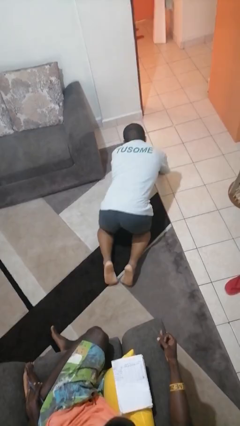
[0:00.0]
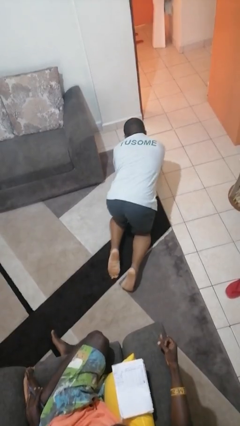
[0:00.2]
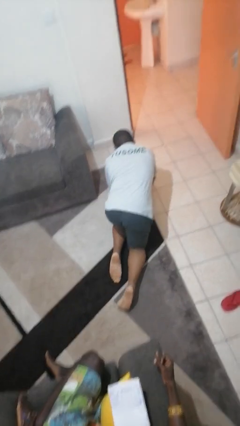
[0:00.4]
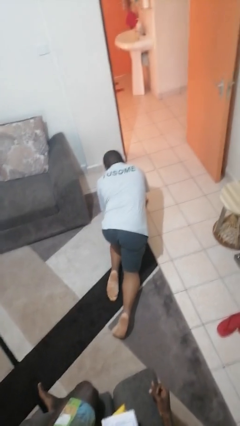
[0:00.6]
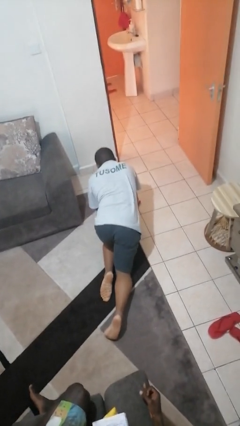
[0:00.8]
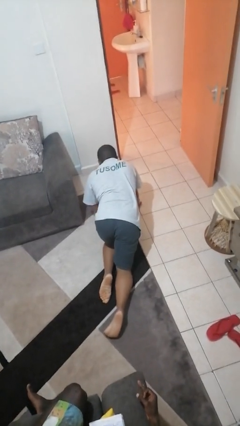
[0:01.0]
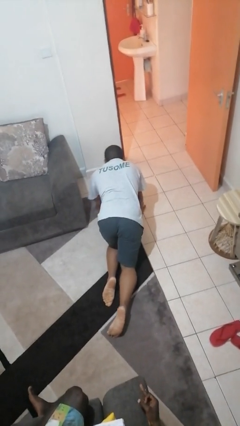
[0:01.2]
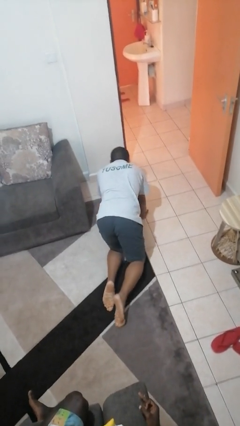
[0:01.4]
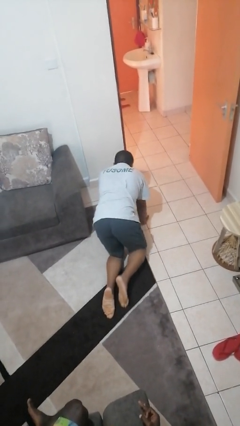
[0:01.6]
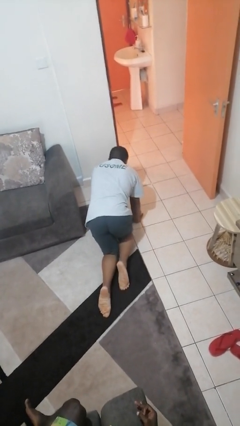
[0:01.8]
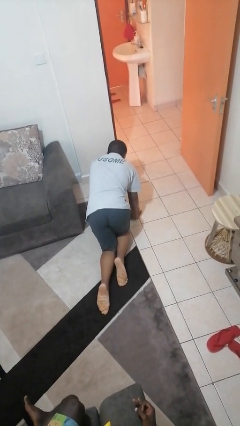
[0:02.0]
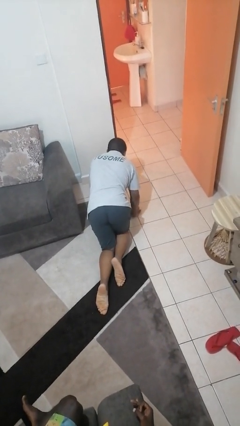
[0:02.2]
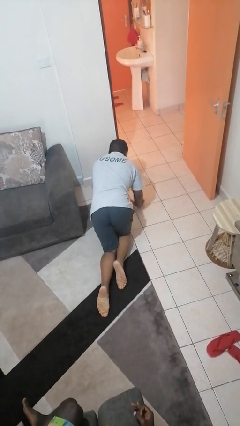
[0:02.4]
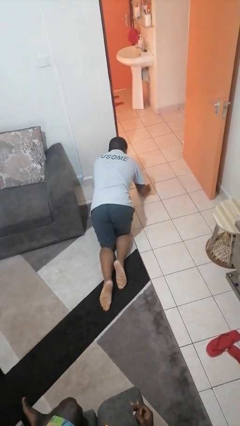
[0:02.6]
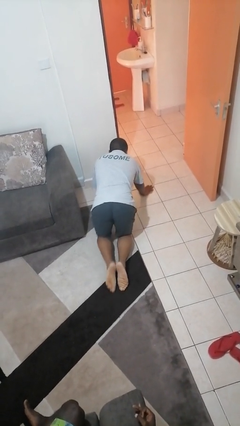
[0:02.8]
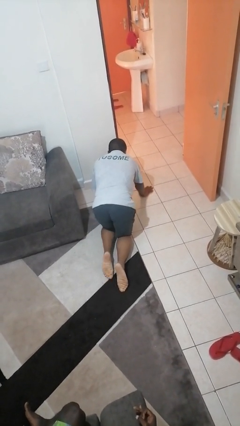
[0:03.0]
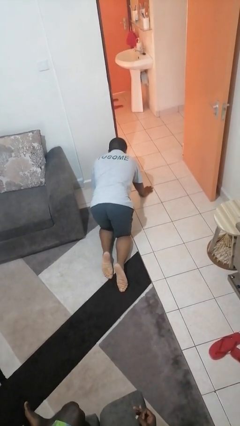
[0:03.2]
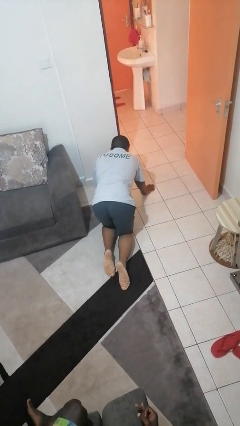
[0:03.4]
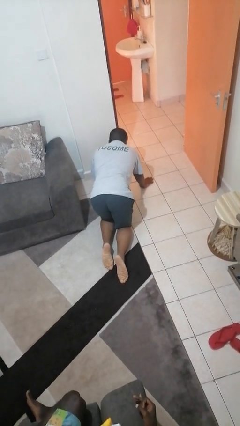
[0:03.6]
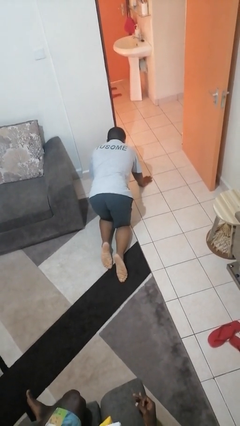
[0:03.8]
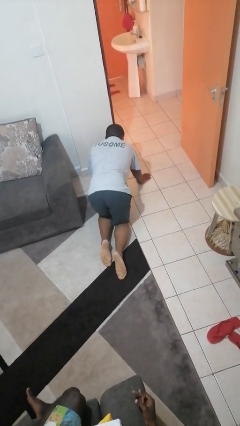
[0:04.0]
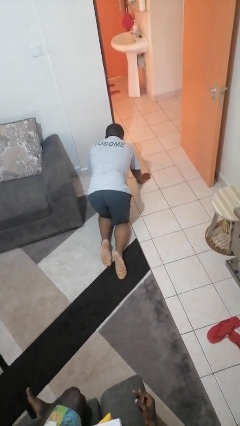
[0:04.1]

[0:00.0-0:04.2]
person crawls

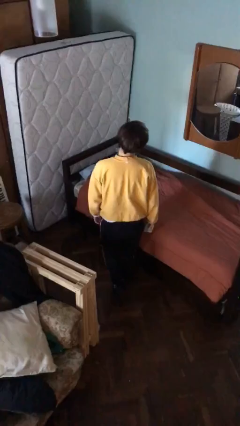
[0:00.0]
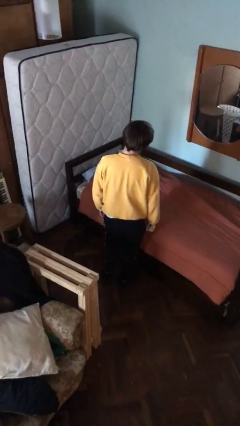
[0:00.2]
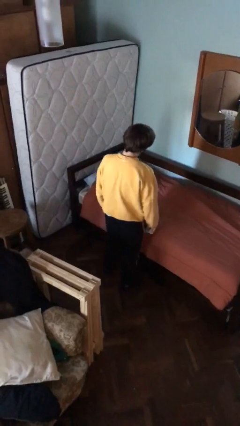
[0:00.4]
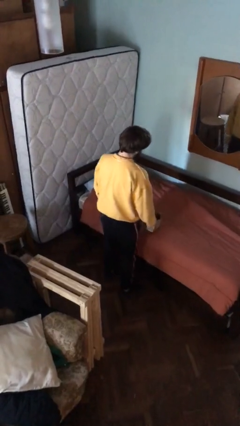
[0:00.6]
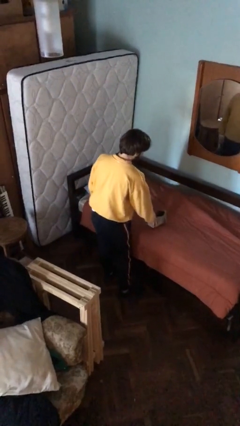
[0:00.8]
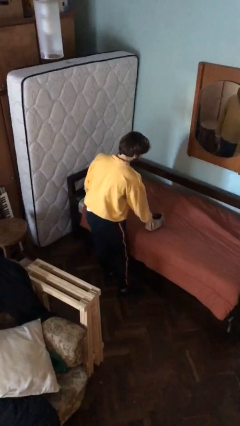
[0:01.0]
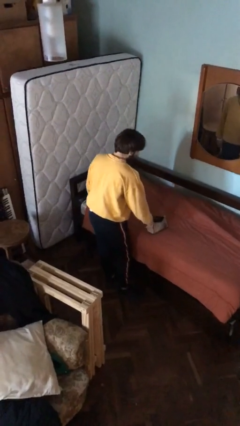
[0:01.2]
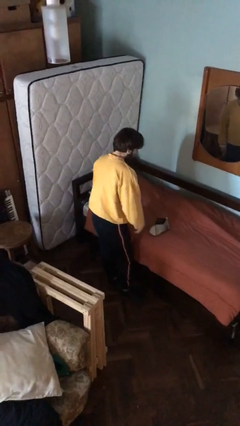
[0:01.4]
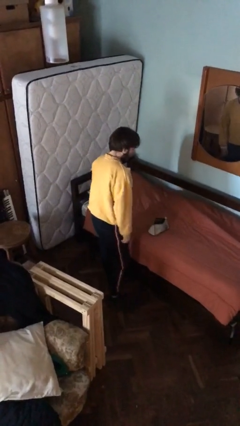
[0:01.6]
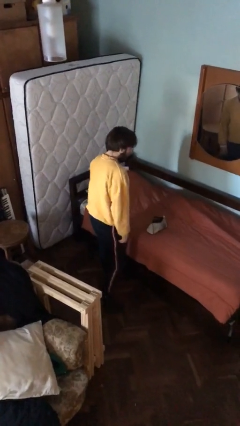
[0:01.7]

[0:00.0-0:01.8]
person puts down object on bed

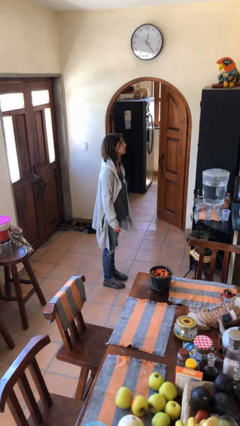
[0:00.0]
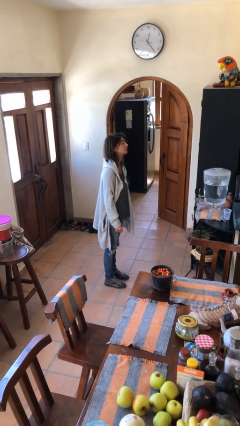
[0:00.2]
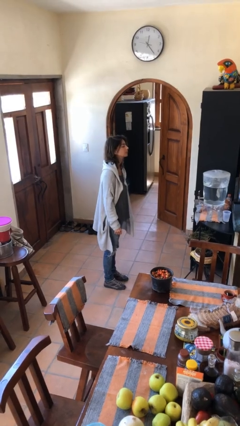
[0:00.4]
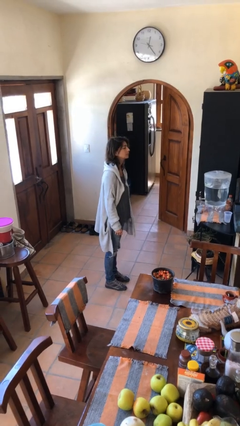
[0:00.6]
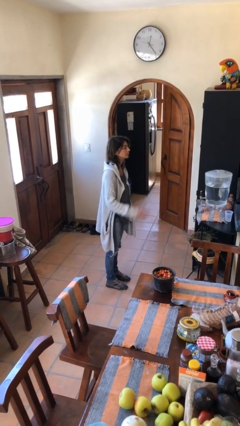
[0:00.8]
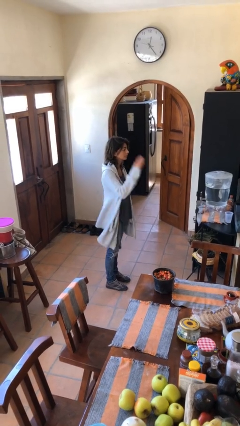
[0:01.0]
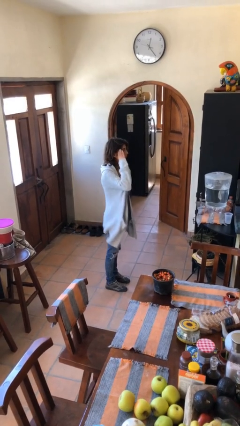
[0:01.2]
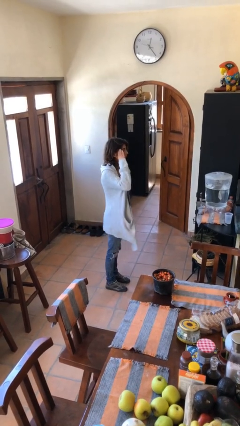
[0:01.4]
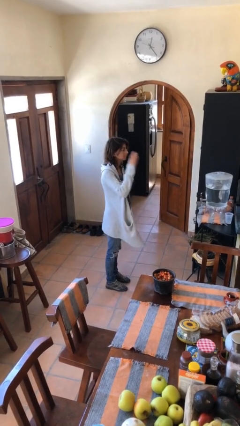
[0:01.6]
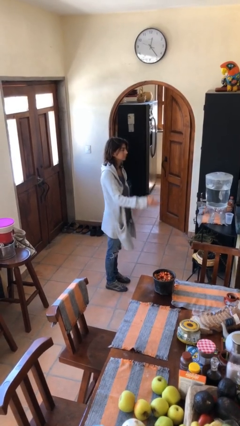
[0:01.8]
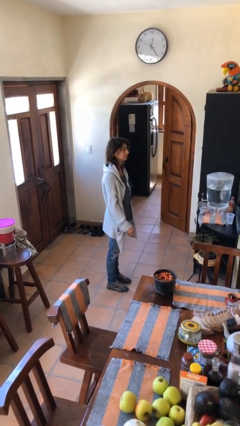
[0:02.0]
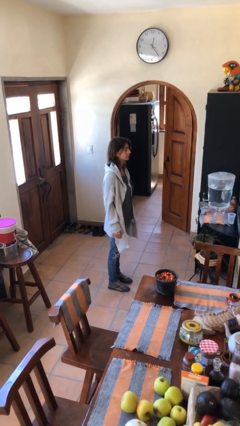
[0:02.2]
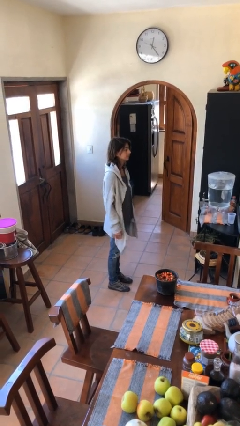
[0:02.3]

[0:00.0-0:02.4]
person salutes

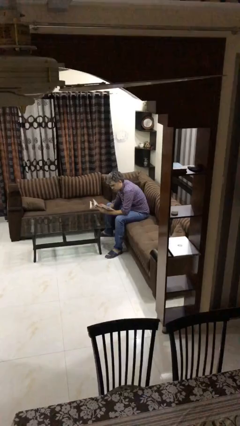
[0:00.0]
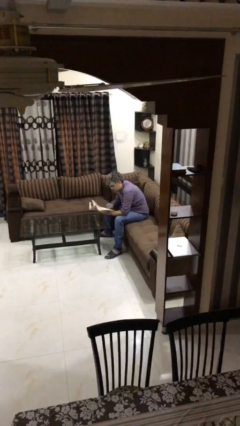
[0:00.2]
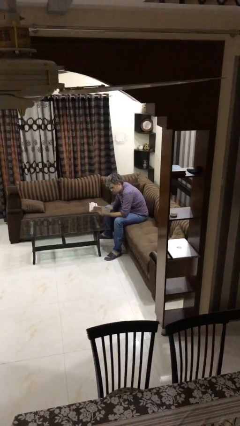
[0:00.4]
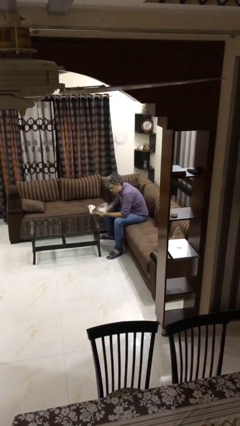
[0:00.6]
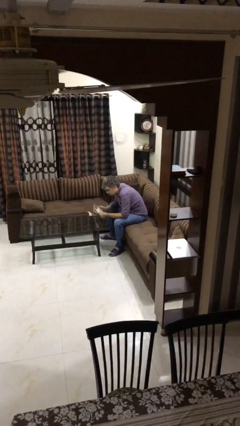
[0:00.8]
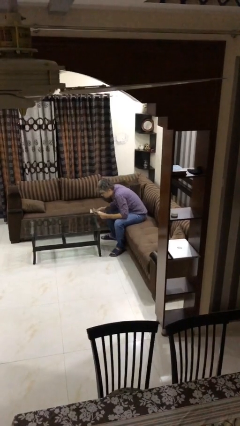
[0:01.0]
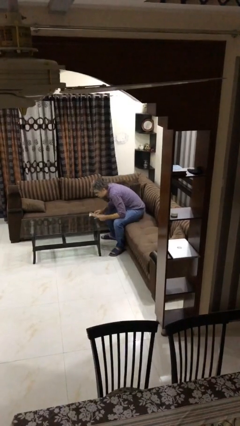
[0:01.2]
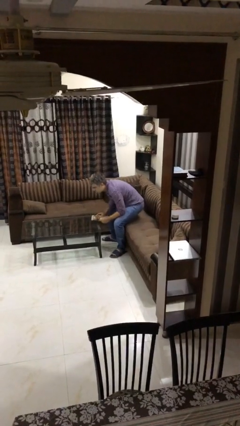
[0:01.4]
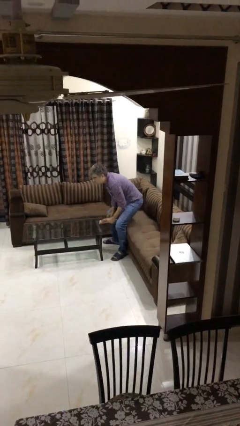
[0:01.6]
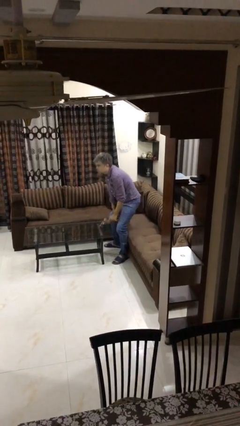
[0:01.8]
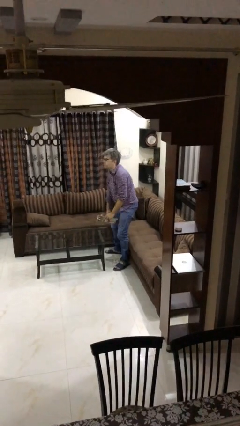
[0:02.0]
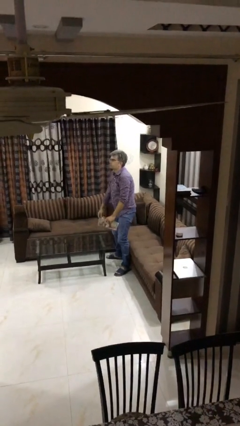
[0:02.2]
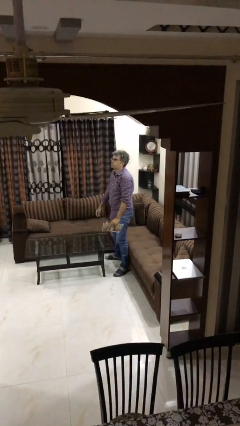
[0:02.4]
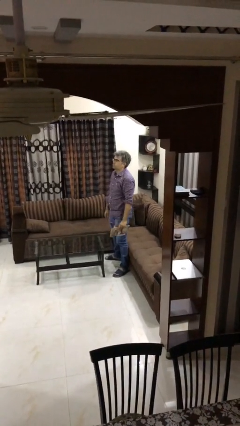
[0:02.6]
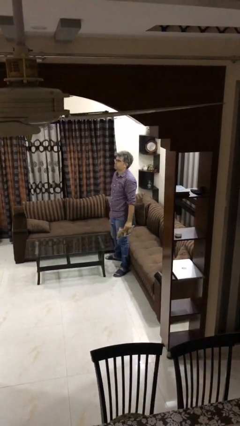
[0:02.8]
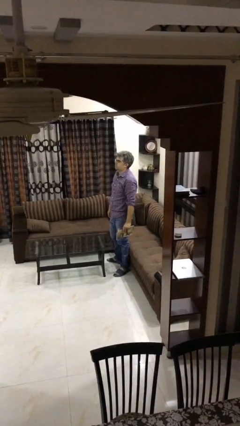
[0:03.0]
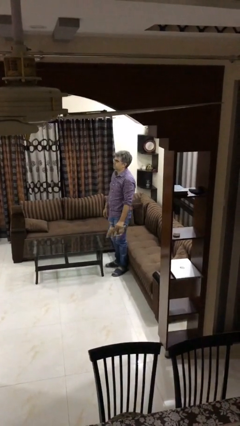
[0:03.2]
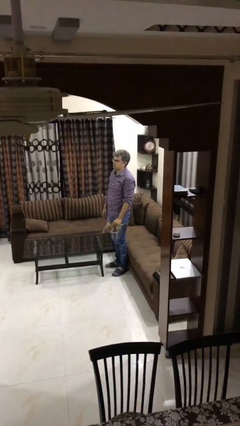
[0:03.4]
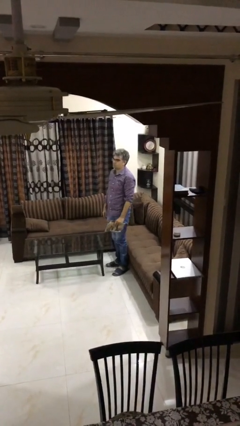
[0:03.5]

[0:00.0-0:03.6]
person stands up

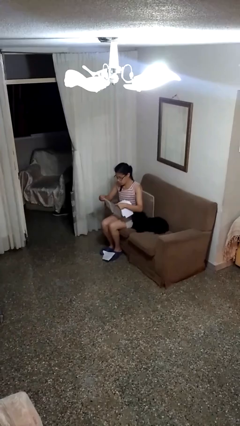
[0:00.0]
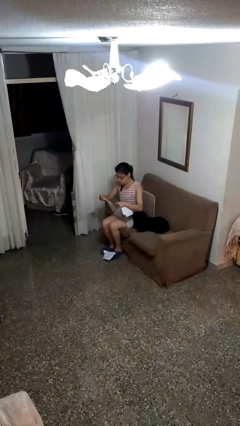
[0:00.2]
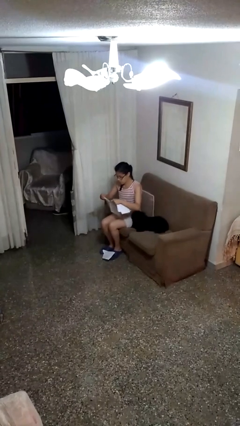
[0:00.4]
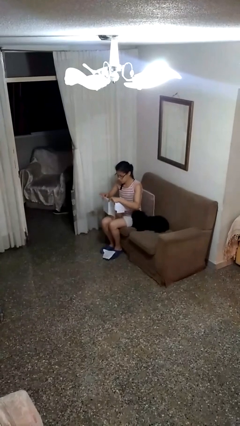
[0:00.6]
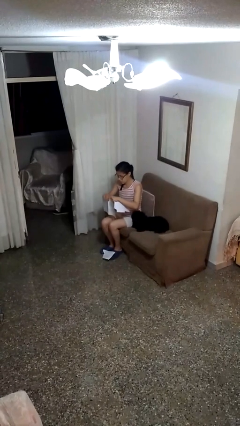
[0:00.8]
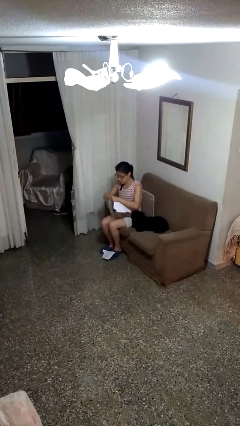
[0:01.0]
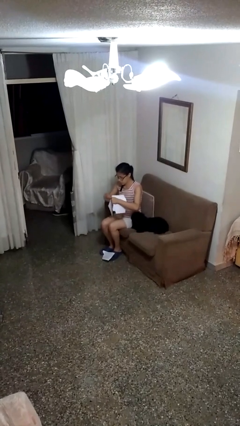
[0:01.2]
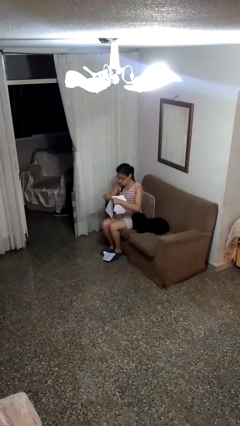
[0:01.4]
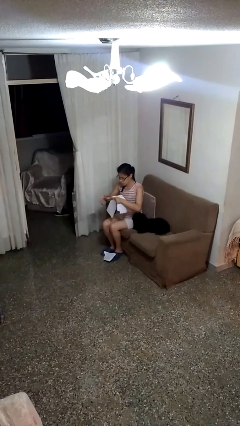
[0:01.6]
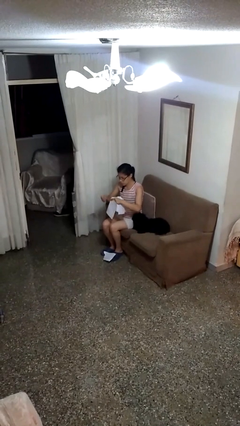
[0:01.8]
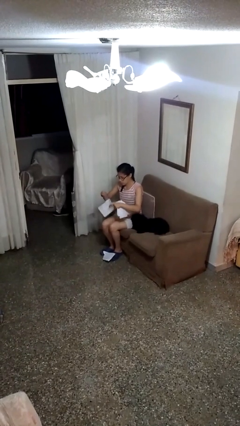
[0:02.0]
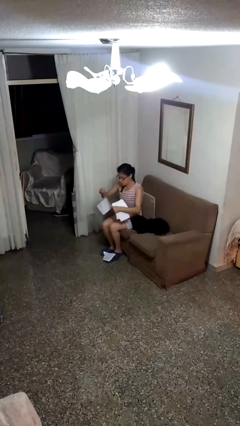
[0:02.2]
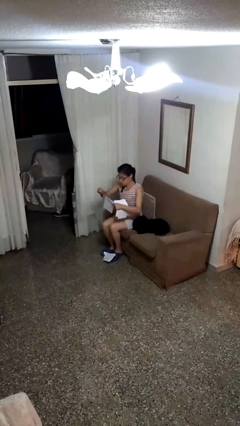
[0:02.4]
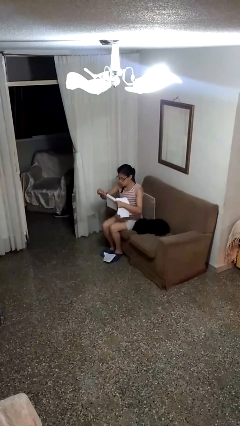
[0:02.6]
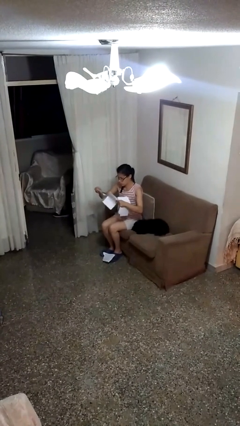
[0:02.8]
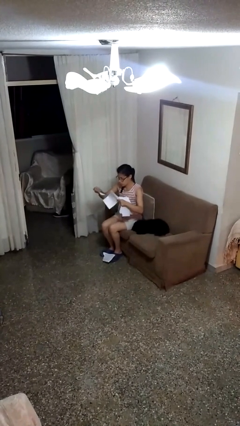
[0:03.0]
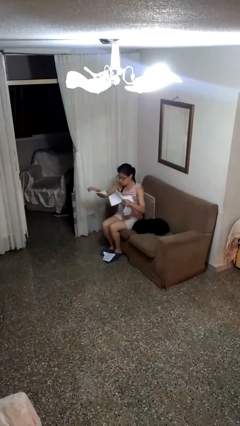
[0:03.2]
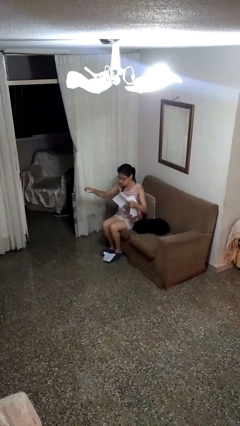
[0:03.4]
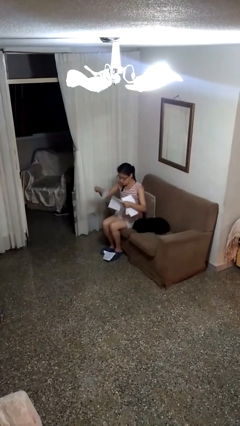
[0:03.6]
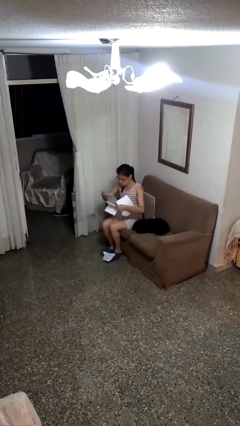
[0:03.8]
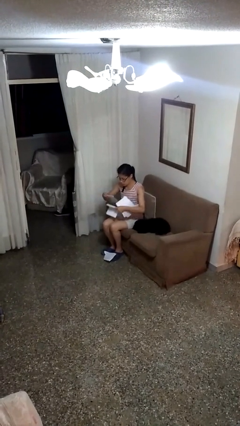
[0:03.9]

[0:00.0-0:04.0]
person tears paper

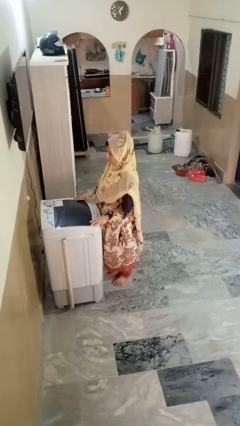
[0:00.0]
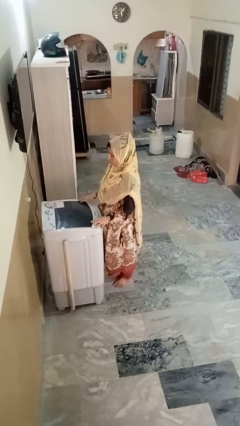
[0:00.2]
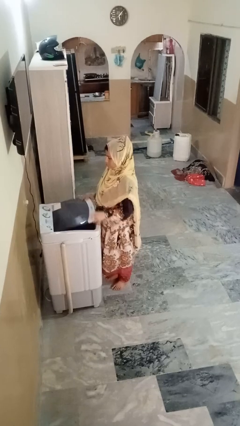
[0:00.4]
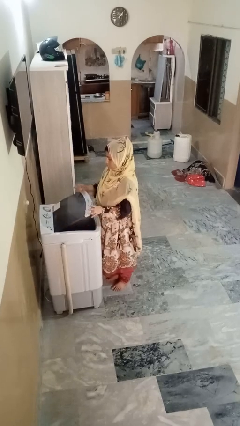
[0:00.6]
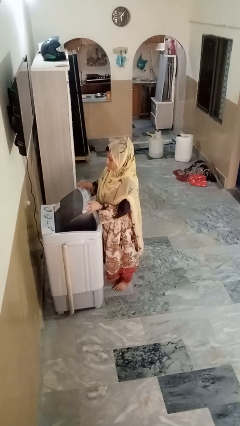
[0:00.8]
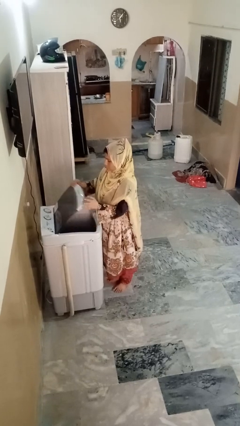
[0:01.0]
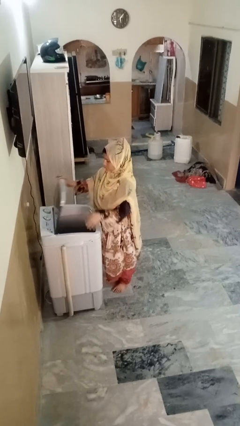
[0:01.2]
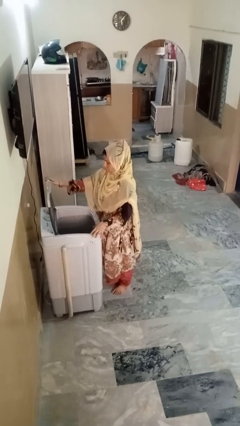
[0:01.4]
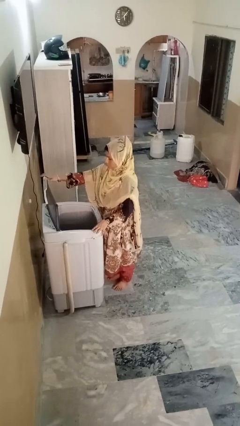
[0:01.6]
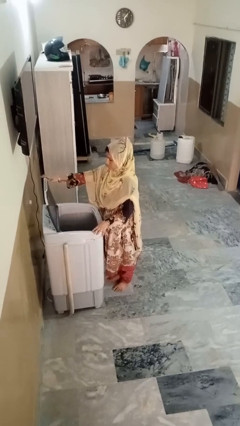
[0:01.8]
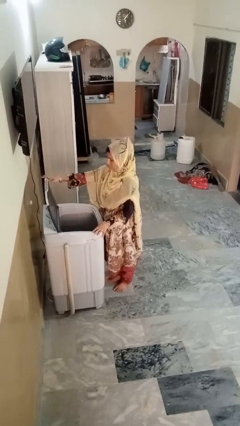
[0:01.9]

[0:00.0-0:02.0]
person opens clothes washer
